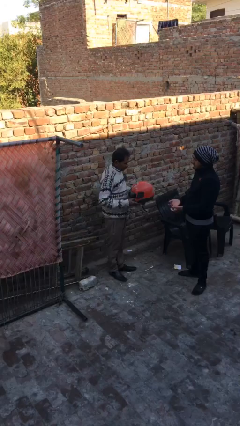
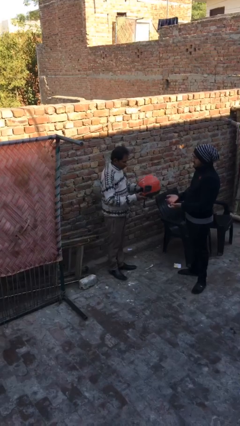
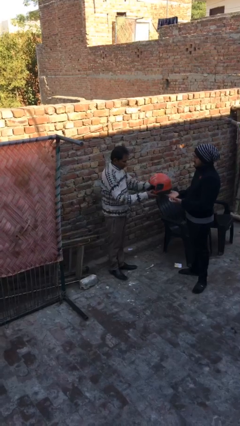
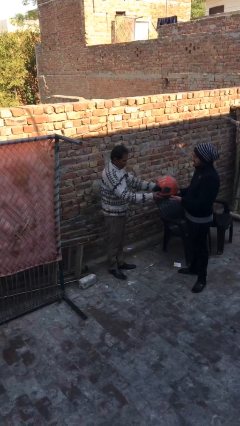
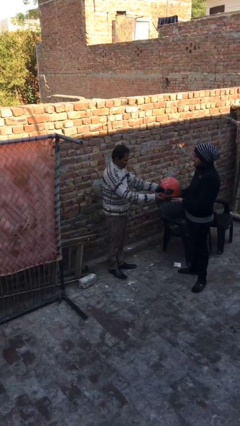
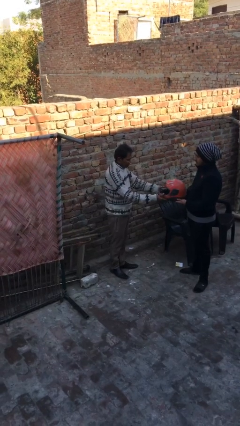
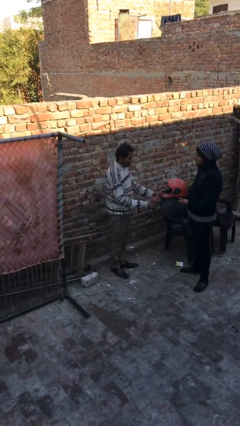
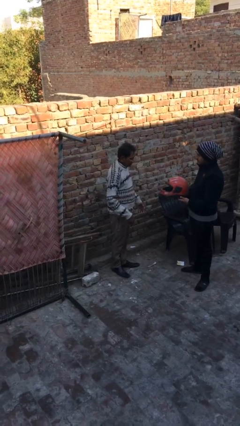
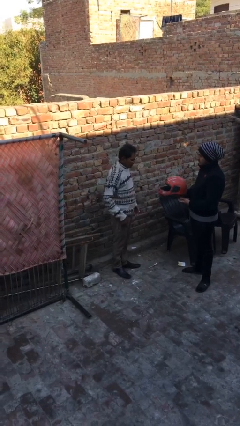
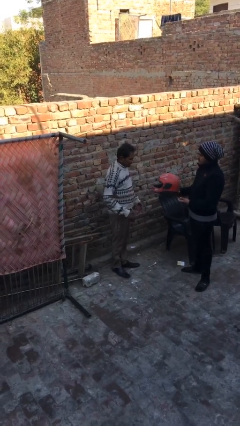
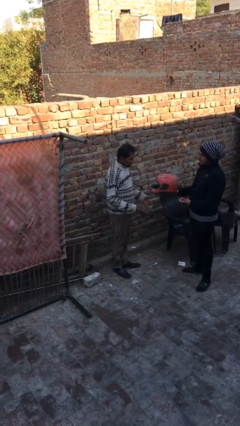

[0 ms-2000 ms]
person transfers object to person

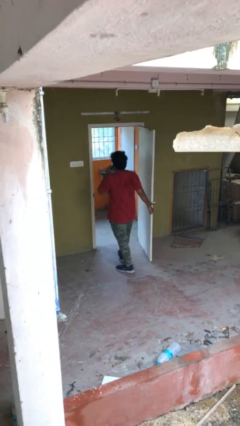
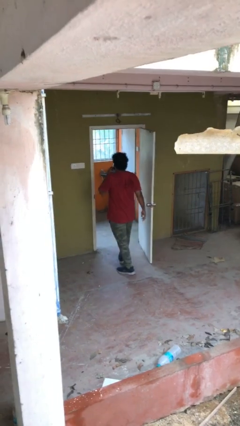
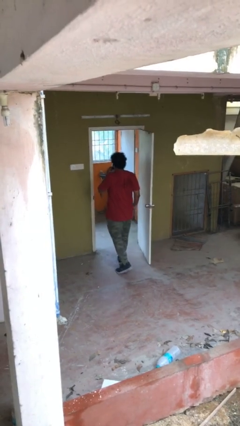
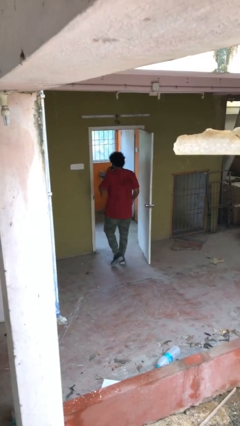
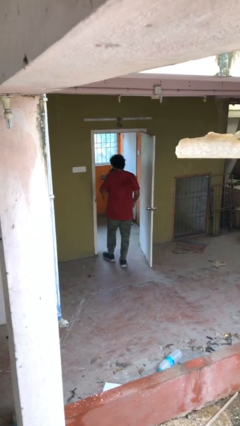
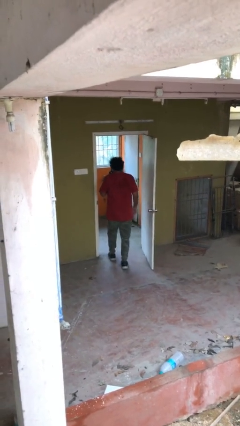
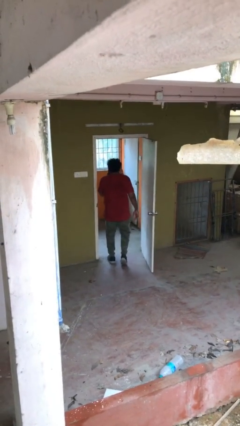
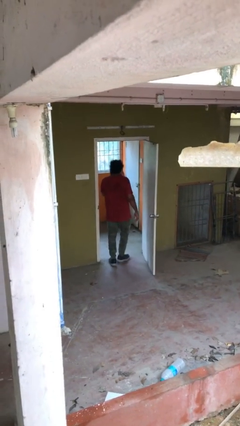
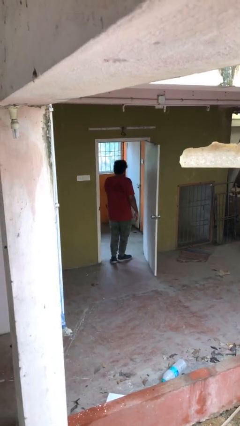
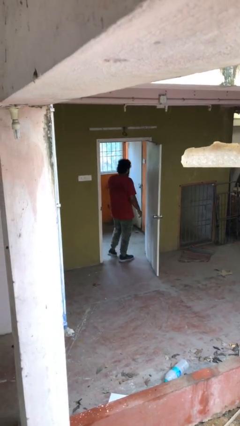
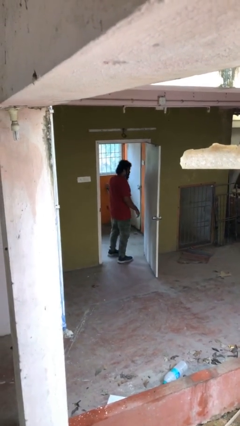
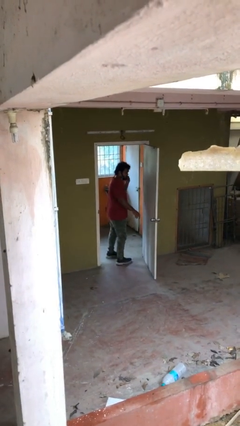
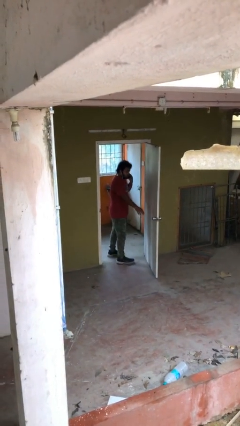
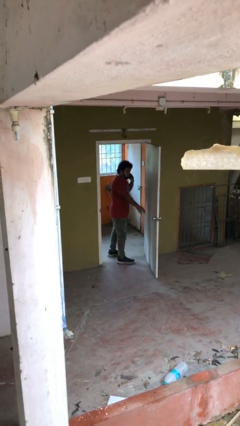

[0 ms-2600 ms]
person exits scene through structure

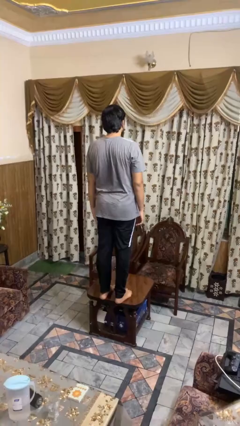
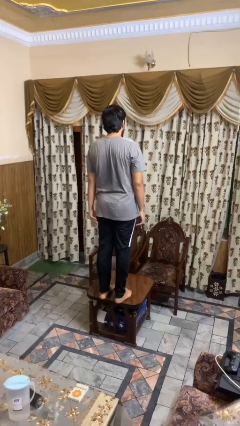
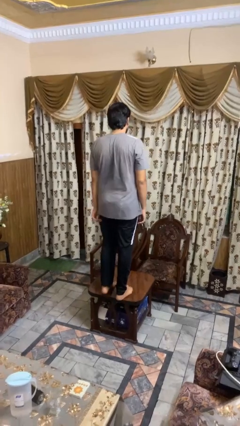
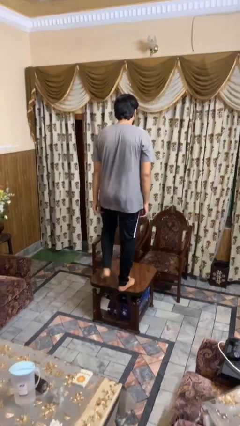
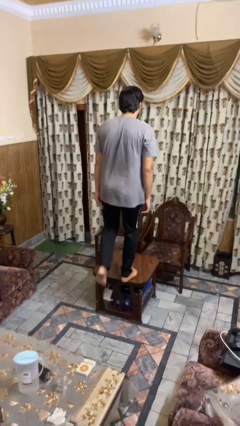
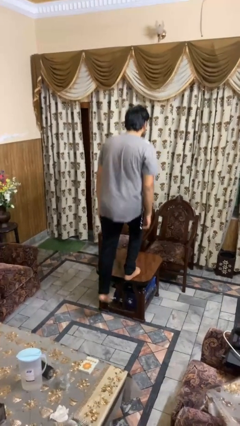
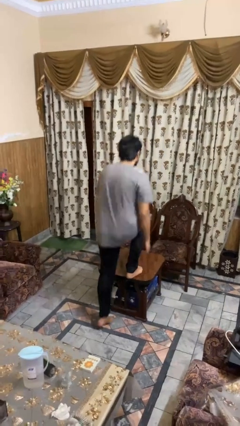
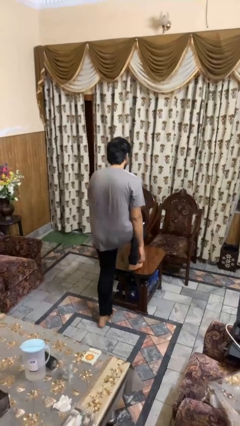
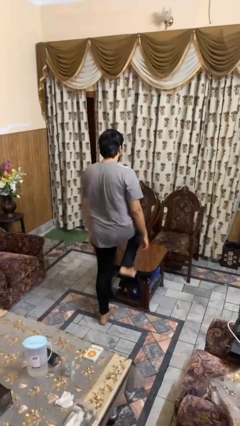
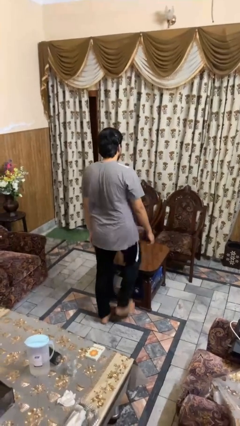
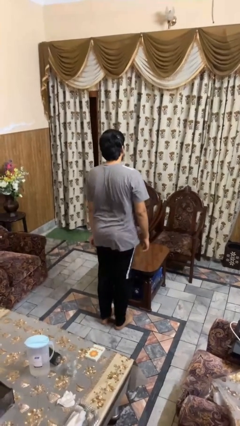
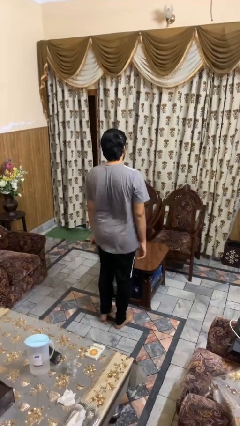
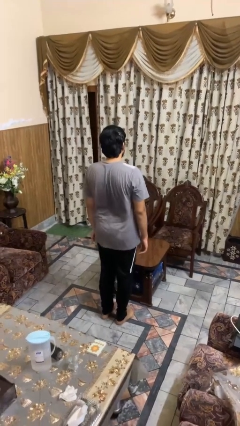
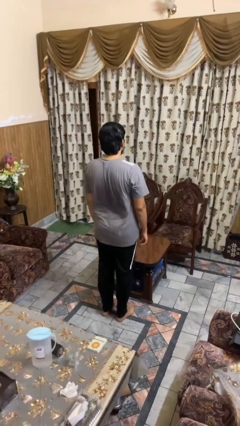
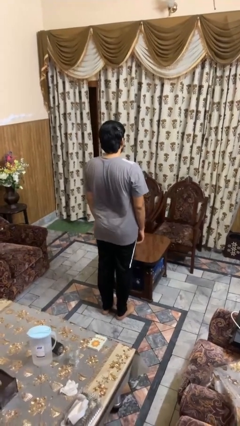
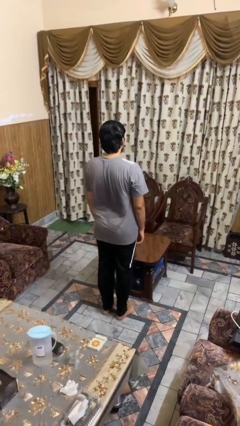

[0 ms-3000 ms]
person climbs off table

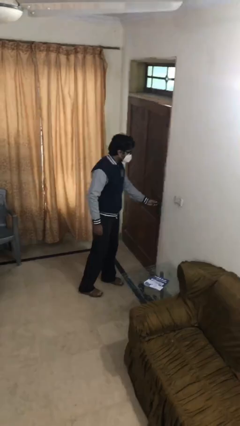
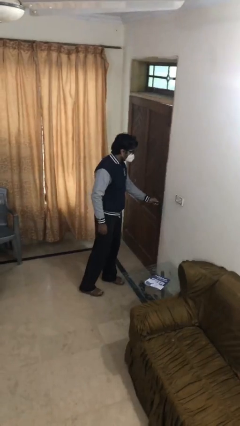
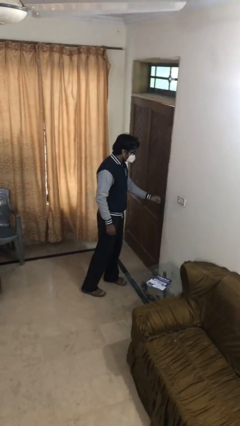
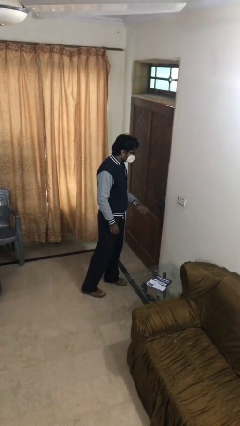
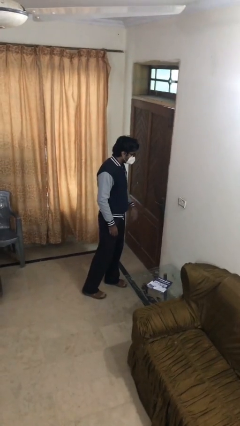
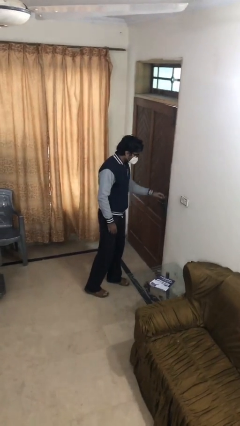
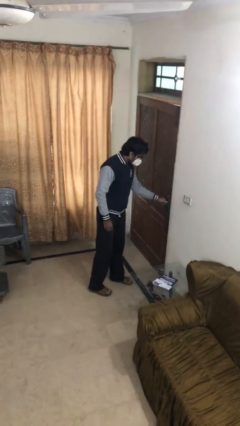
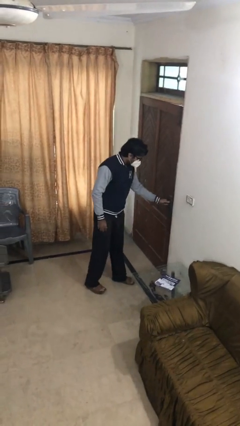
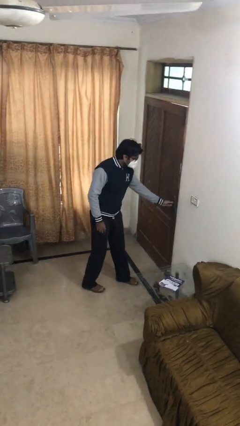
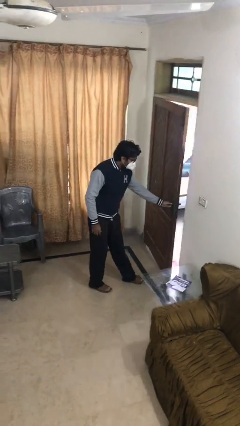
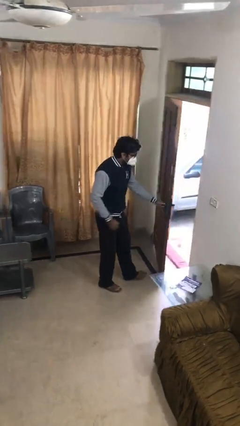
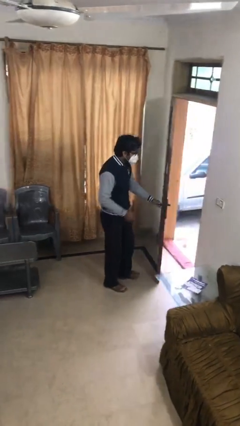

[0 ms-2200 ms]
person opens facility door

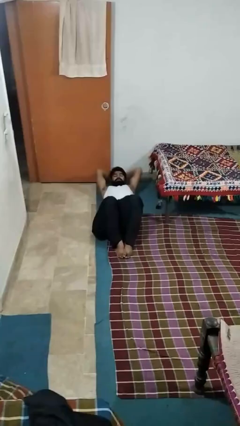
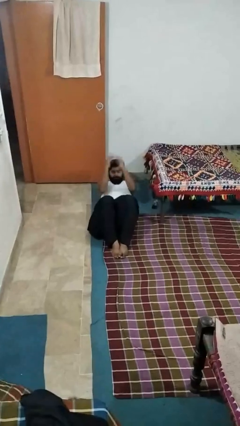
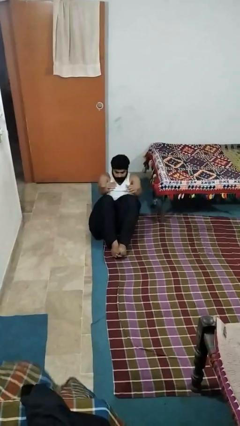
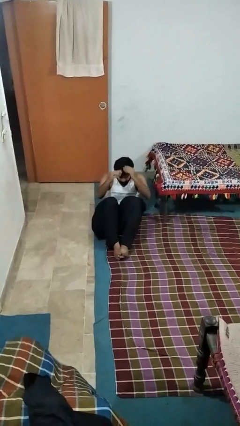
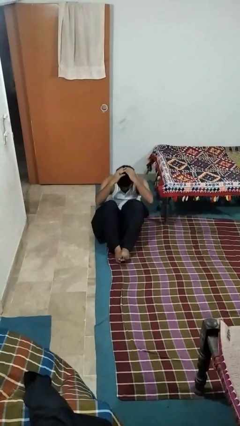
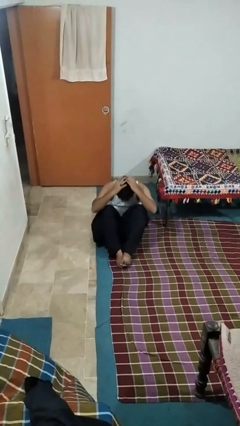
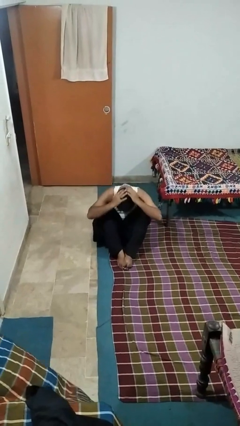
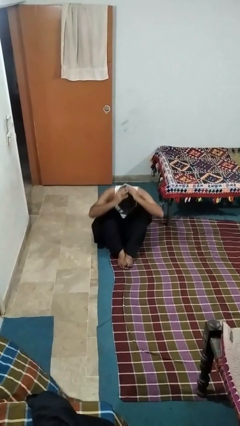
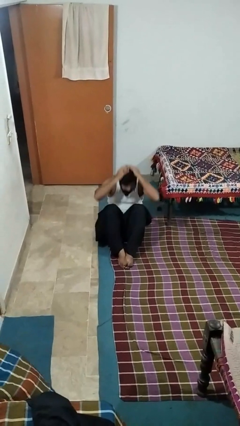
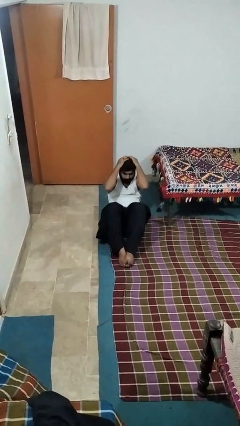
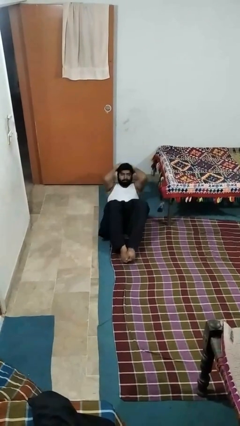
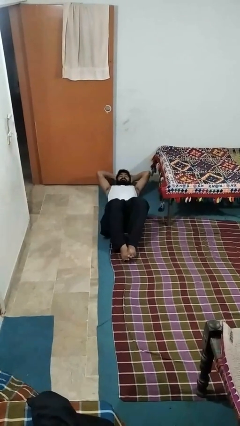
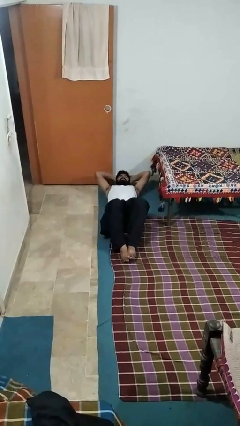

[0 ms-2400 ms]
person exercises with situp

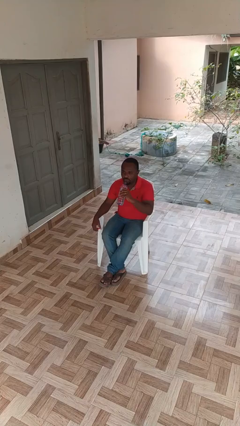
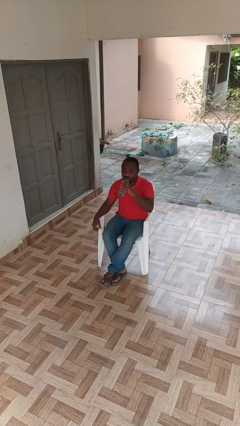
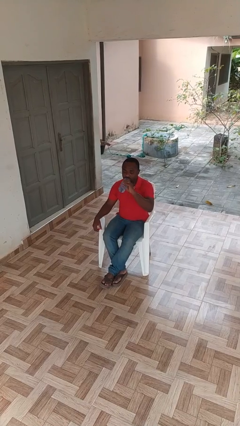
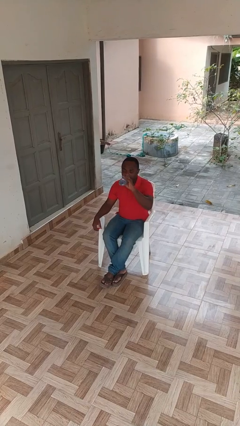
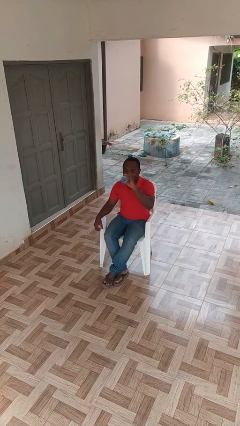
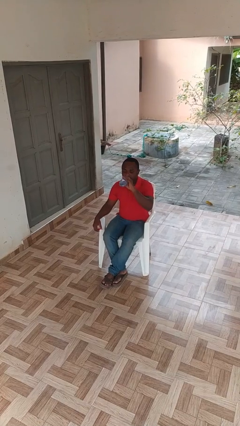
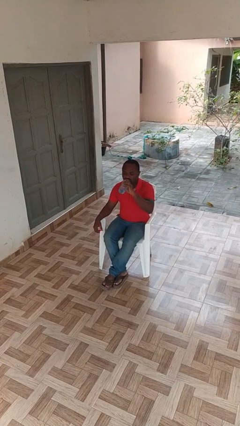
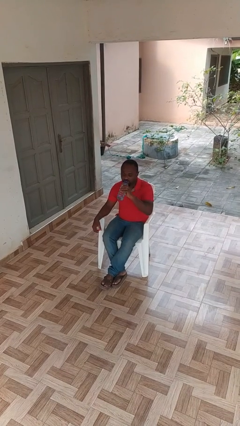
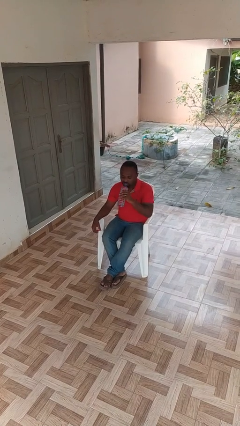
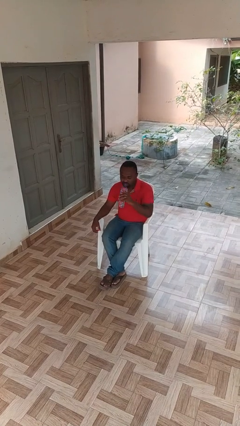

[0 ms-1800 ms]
person drinks from bottle

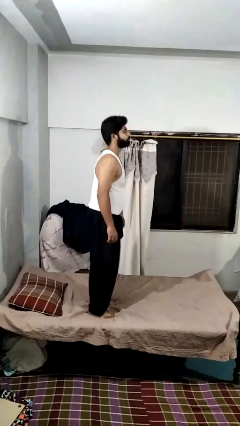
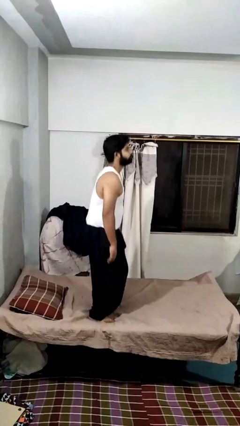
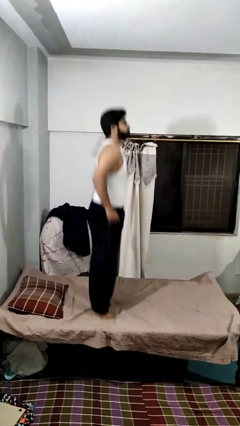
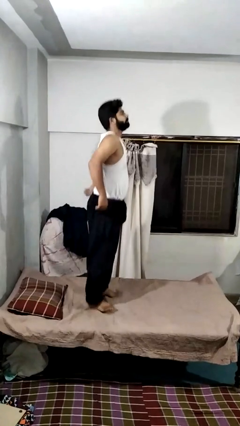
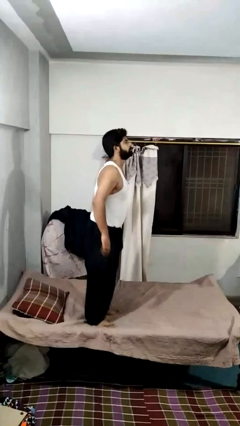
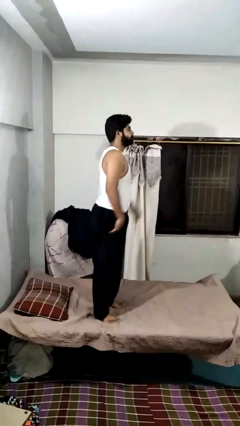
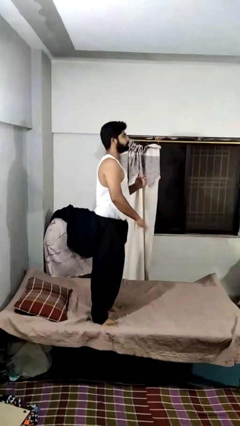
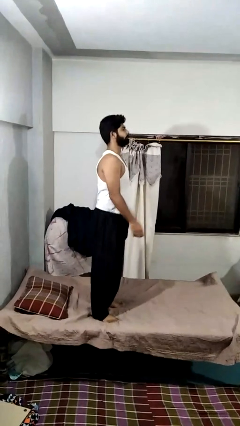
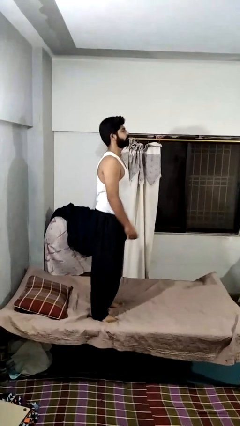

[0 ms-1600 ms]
person jumps on bed

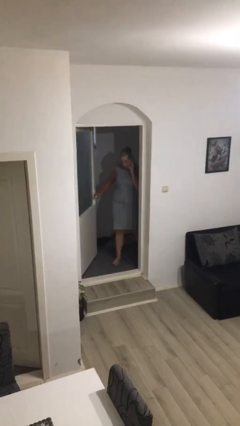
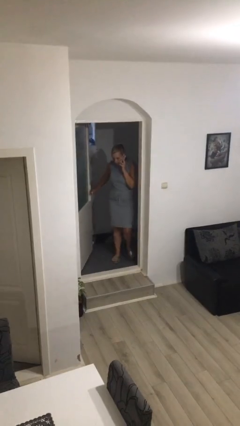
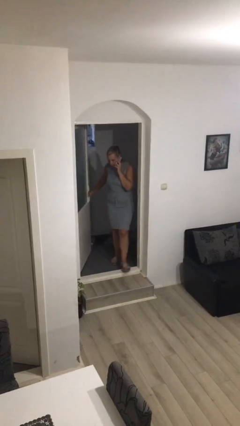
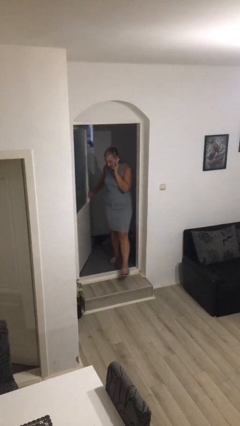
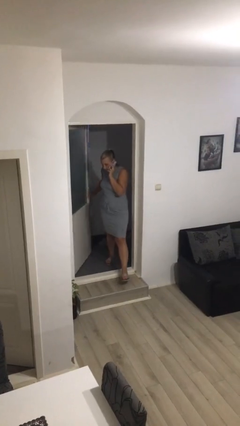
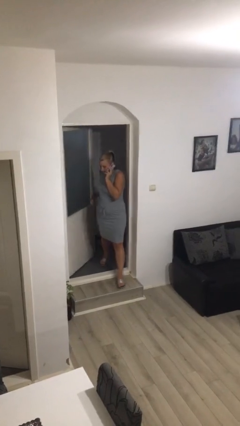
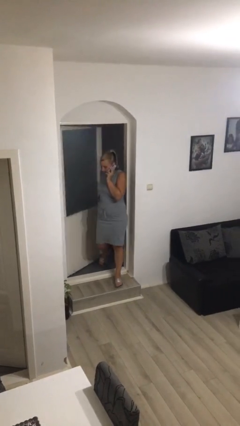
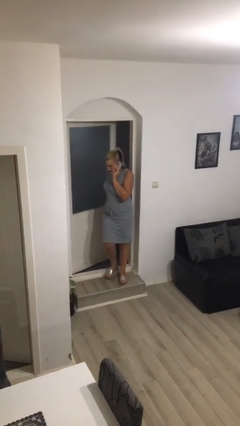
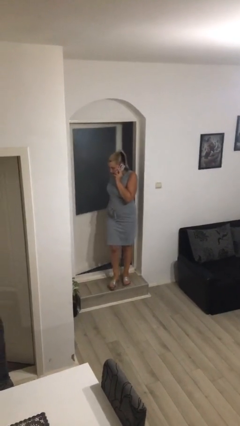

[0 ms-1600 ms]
person enters scene through structure
